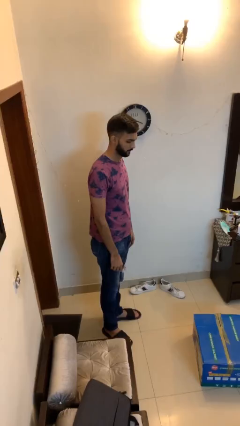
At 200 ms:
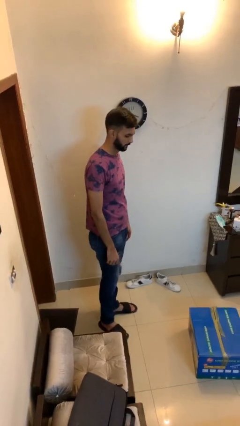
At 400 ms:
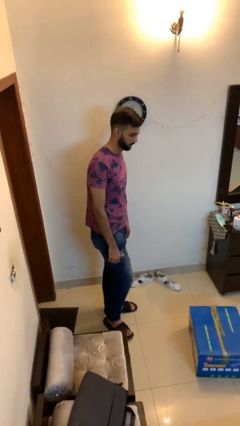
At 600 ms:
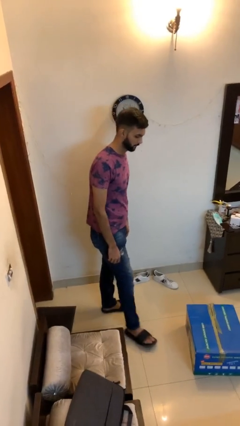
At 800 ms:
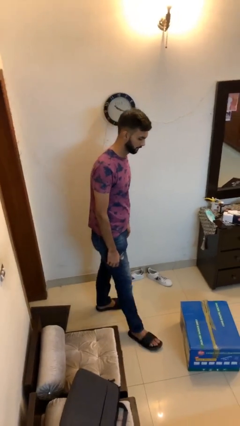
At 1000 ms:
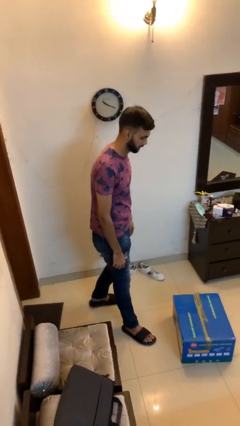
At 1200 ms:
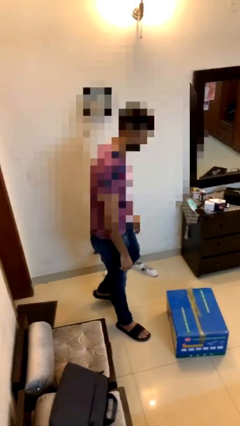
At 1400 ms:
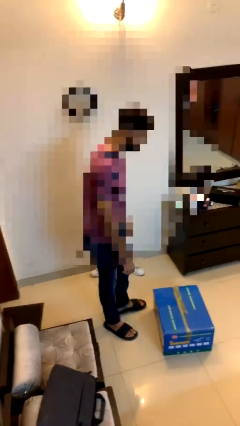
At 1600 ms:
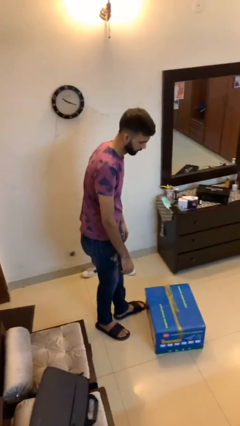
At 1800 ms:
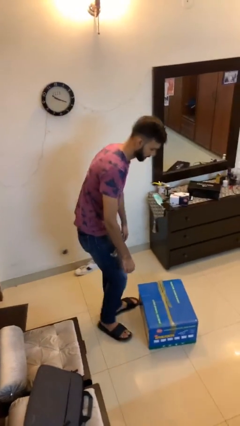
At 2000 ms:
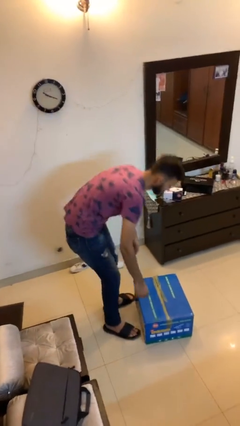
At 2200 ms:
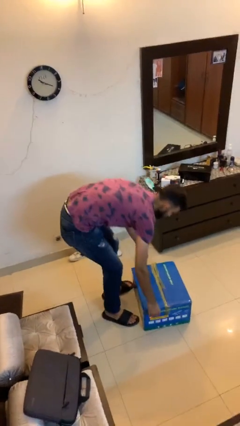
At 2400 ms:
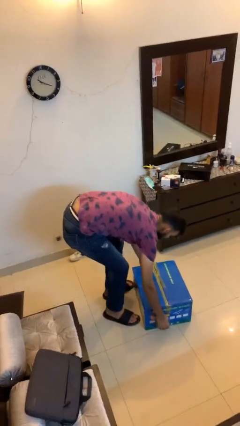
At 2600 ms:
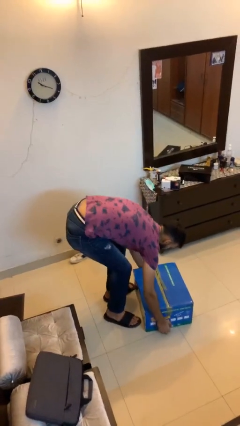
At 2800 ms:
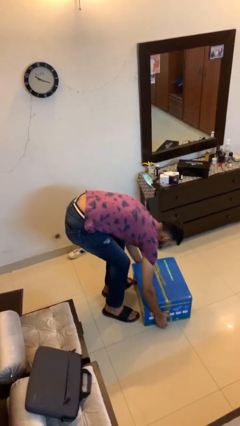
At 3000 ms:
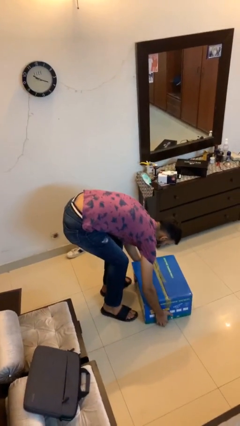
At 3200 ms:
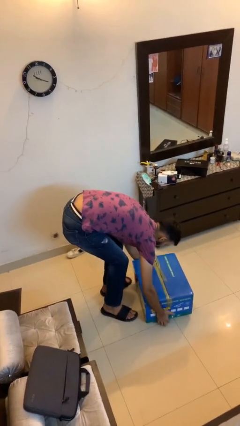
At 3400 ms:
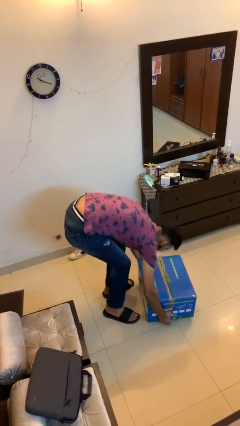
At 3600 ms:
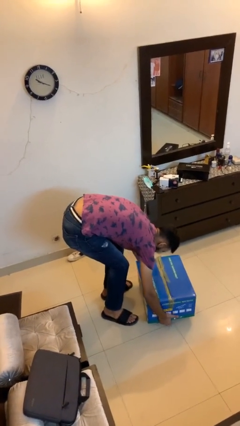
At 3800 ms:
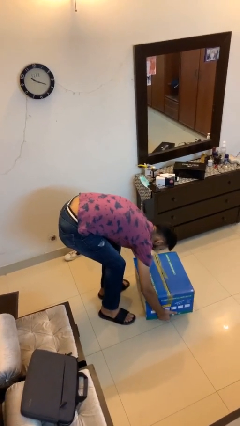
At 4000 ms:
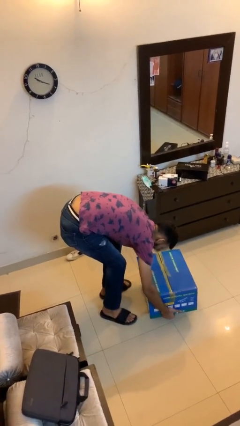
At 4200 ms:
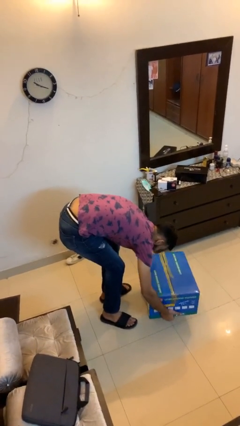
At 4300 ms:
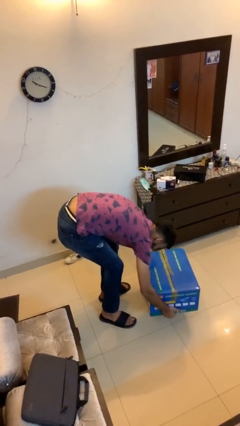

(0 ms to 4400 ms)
person picks up object from floor

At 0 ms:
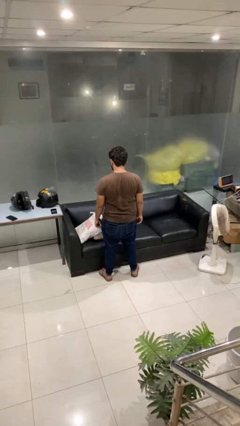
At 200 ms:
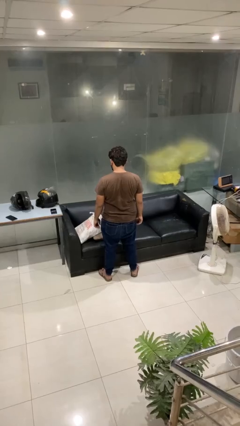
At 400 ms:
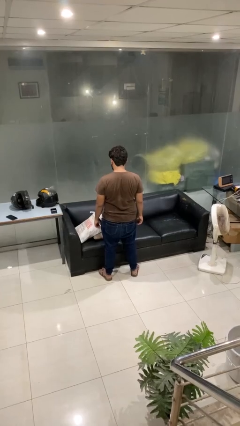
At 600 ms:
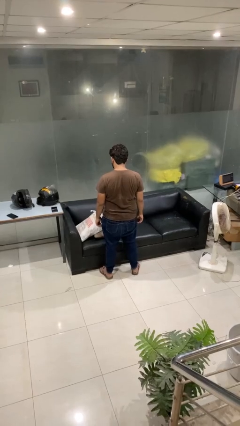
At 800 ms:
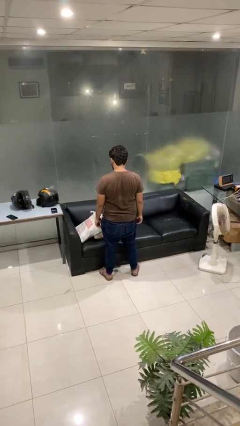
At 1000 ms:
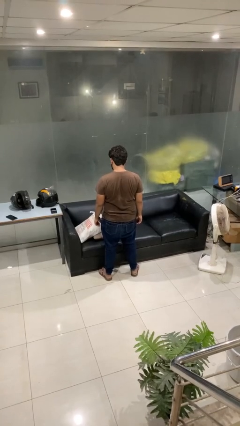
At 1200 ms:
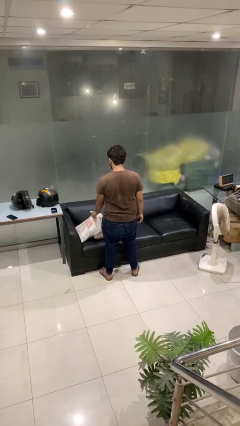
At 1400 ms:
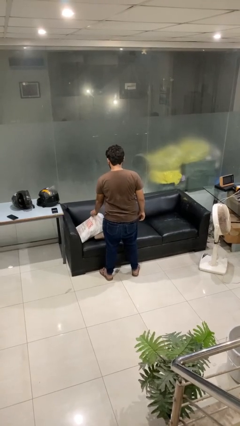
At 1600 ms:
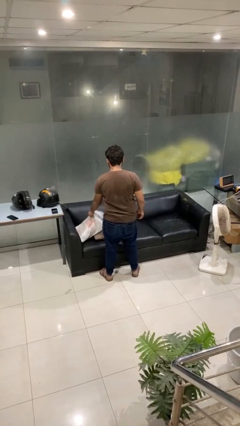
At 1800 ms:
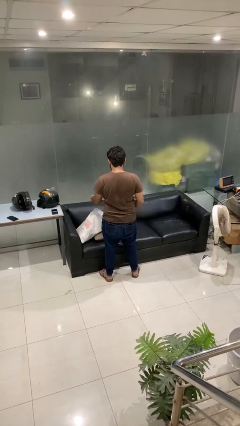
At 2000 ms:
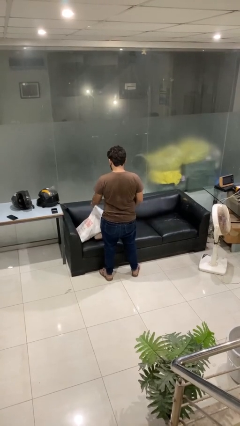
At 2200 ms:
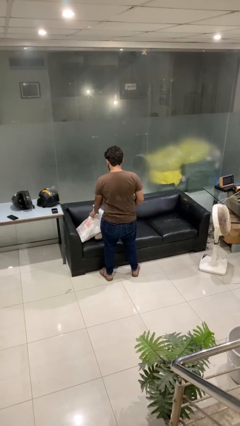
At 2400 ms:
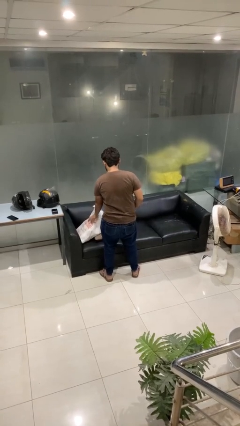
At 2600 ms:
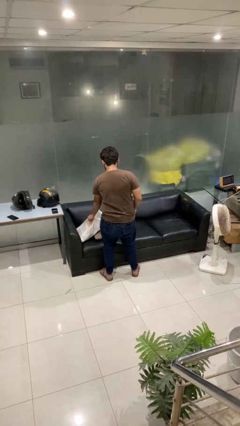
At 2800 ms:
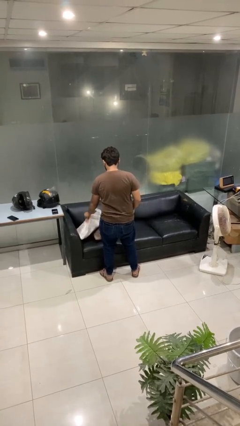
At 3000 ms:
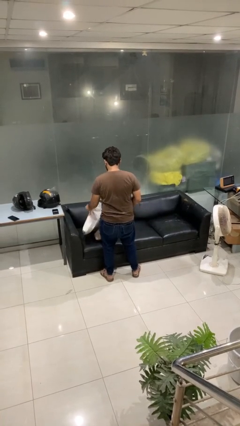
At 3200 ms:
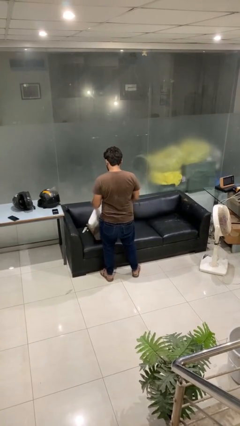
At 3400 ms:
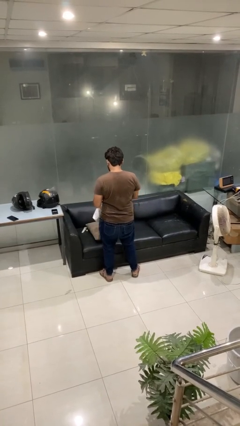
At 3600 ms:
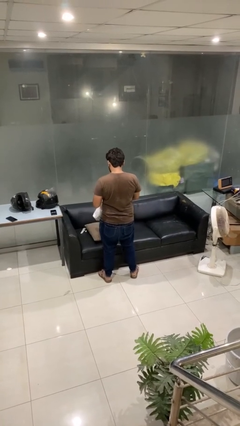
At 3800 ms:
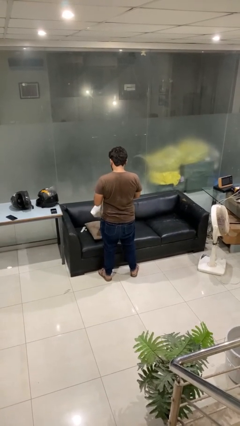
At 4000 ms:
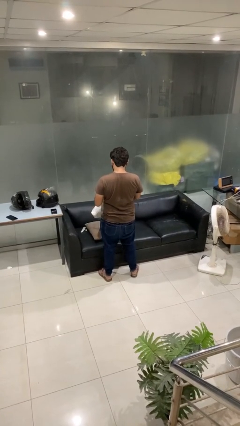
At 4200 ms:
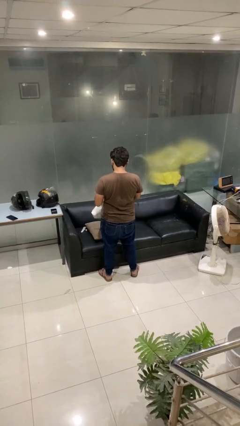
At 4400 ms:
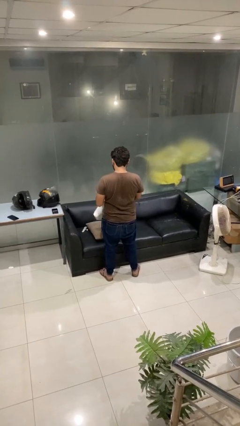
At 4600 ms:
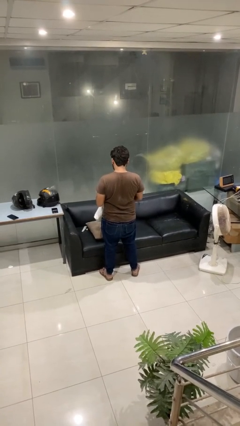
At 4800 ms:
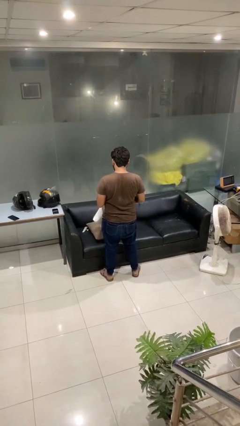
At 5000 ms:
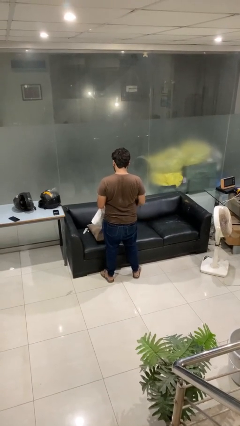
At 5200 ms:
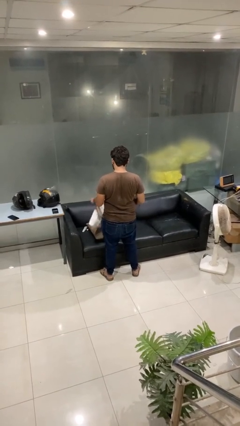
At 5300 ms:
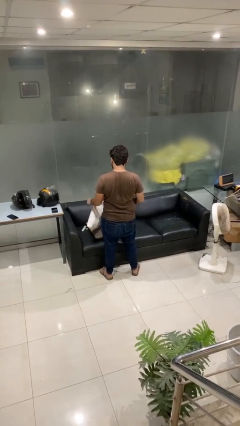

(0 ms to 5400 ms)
person searches in bag

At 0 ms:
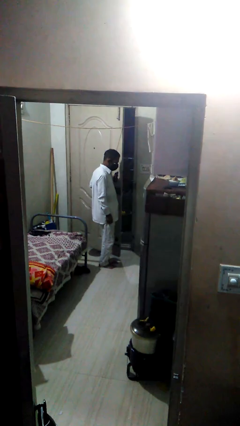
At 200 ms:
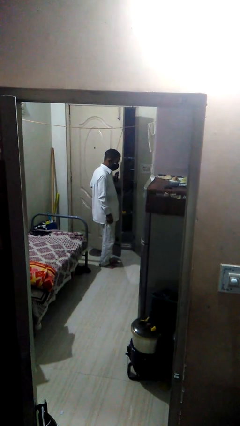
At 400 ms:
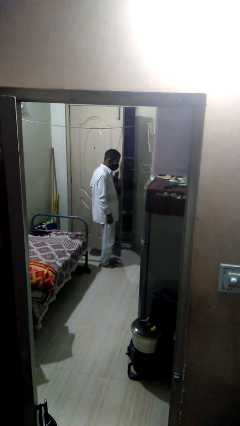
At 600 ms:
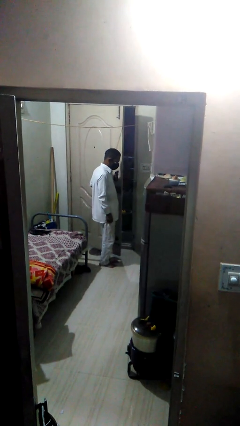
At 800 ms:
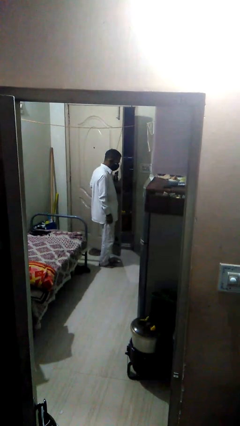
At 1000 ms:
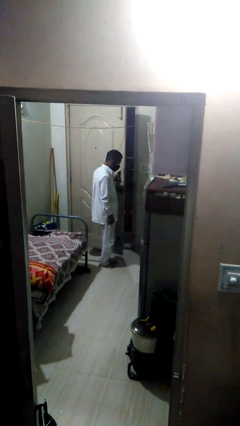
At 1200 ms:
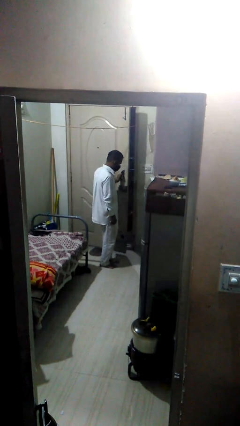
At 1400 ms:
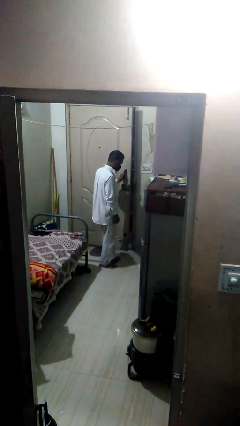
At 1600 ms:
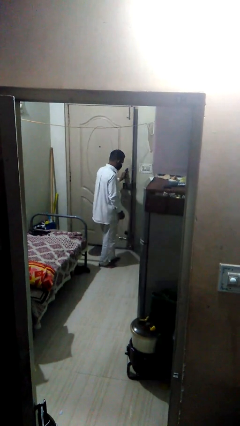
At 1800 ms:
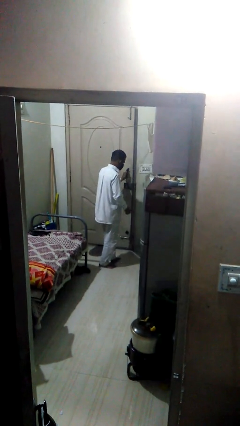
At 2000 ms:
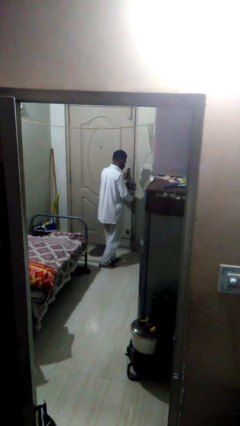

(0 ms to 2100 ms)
person closes facility door

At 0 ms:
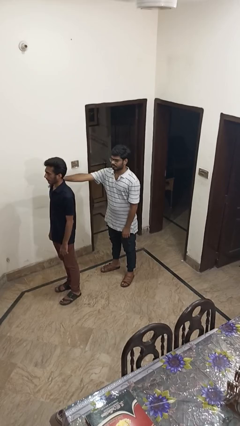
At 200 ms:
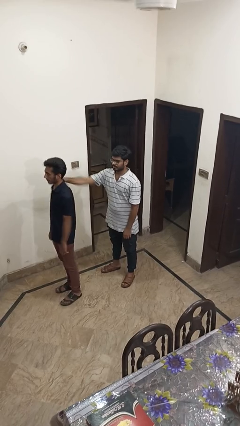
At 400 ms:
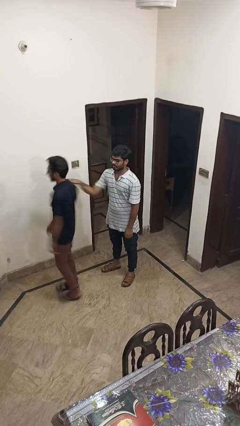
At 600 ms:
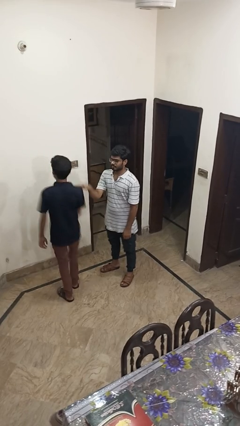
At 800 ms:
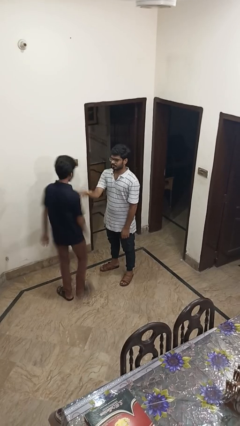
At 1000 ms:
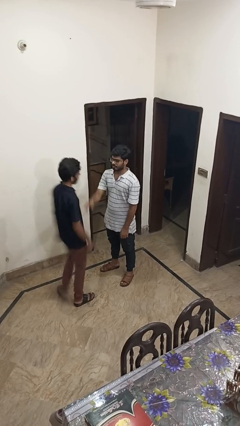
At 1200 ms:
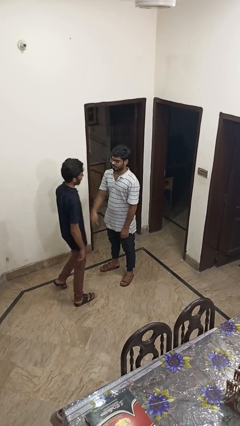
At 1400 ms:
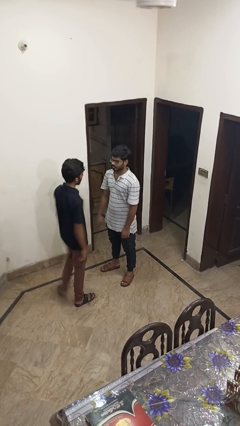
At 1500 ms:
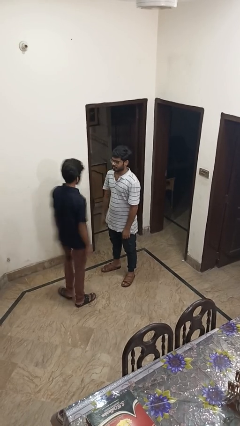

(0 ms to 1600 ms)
person spins person around

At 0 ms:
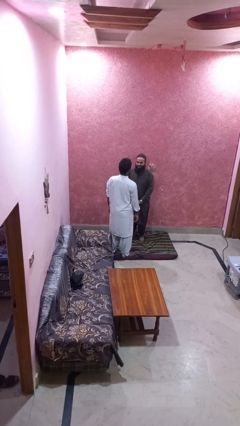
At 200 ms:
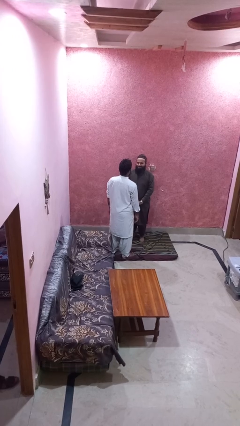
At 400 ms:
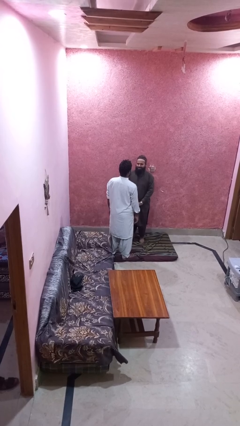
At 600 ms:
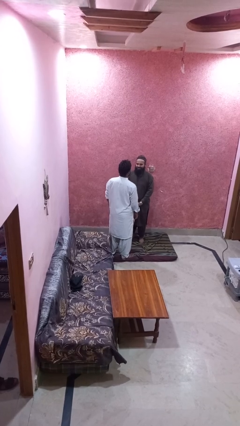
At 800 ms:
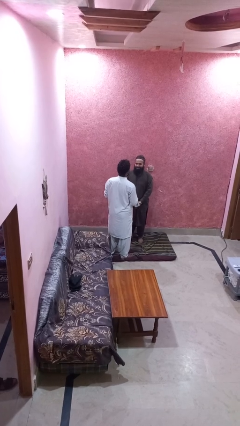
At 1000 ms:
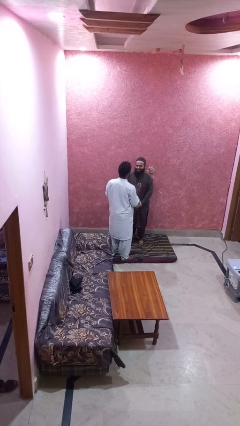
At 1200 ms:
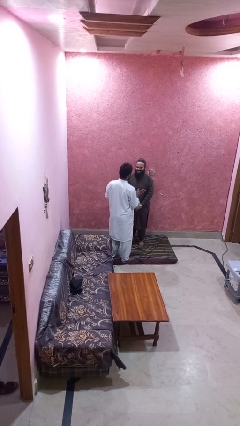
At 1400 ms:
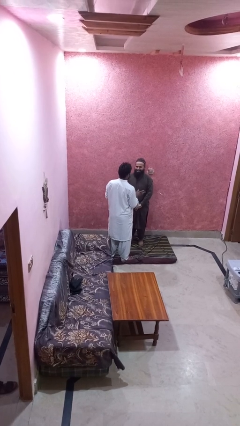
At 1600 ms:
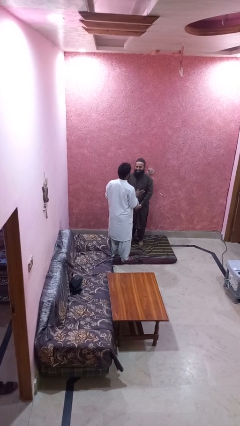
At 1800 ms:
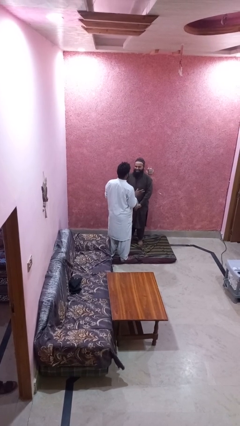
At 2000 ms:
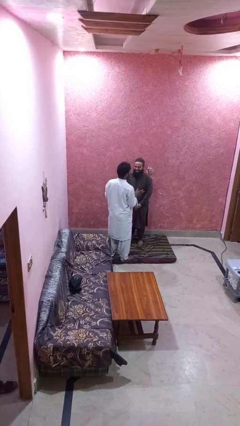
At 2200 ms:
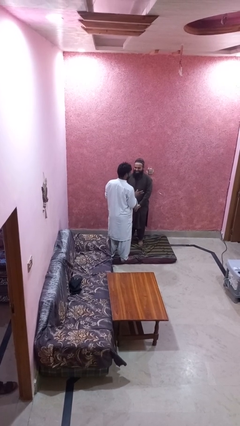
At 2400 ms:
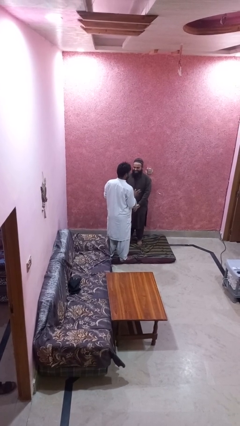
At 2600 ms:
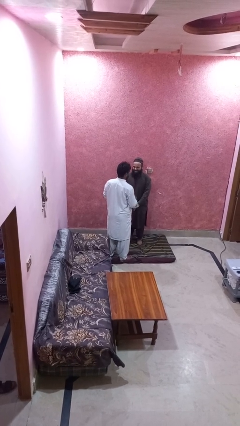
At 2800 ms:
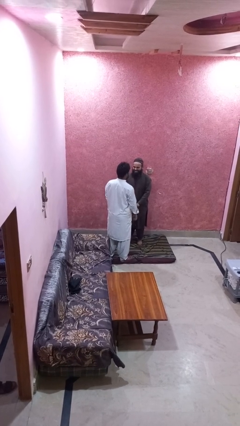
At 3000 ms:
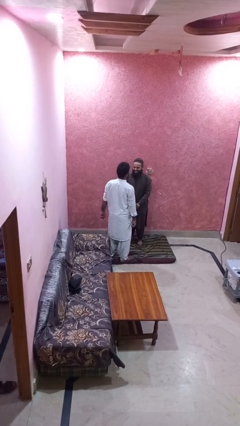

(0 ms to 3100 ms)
person laughs with person

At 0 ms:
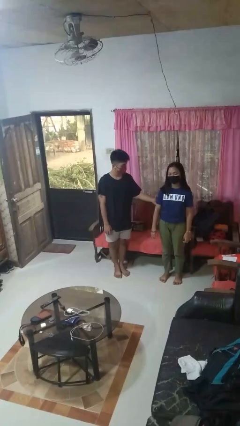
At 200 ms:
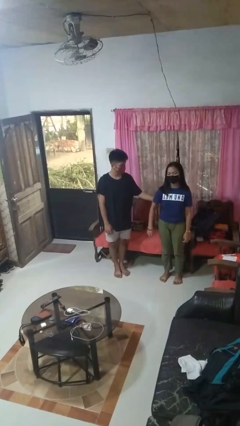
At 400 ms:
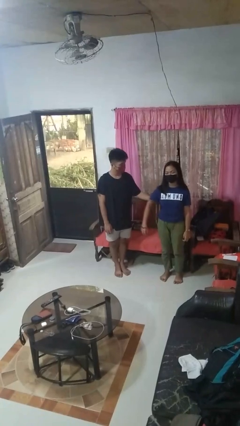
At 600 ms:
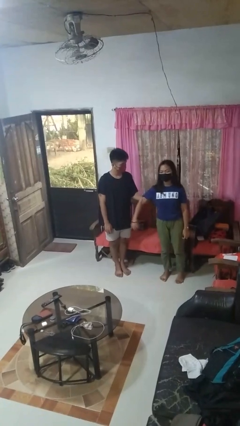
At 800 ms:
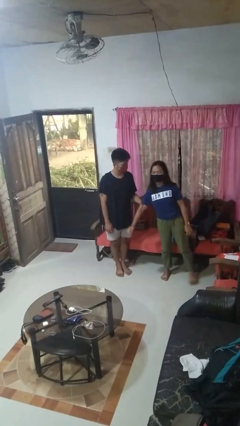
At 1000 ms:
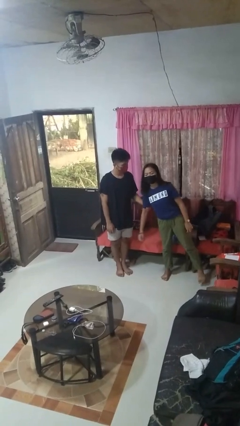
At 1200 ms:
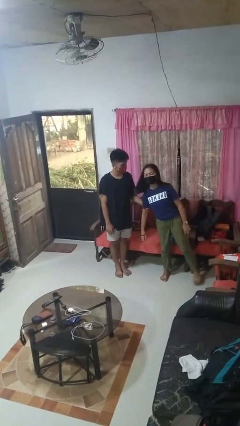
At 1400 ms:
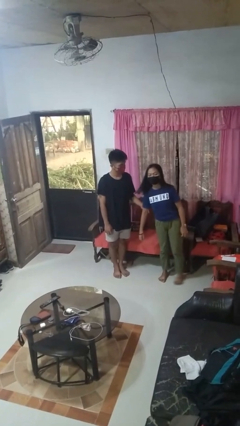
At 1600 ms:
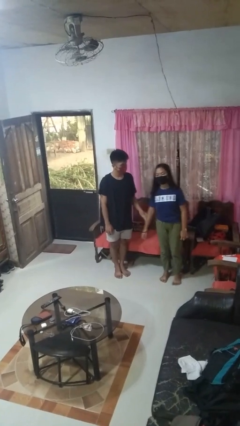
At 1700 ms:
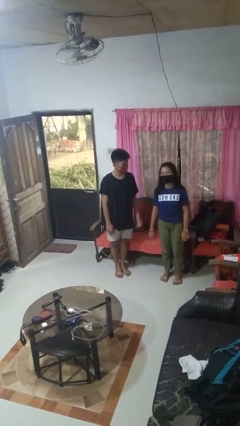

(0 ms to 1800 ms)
person grabs person by bicep
